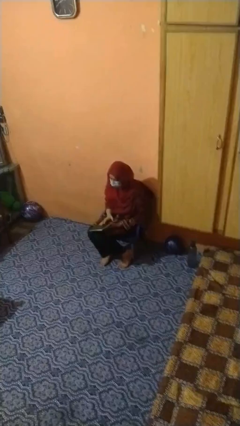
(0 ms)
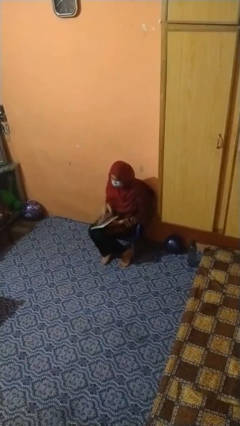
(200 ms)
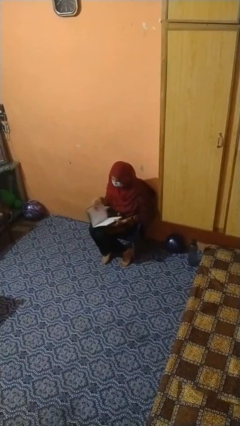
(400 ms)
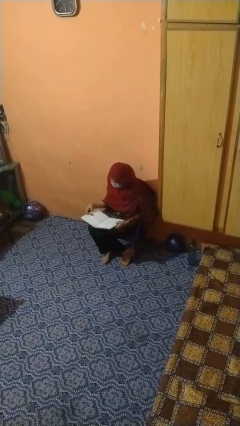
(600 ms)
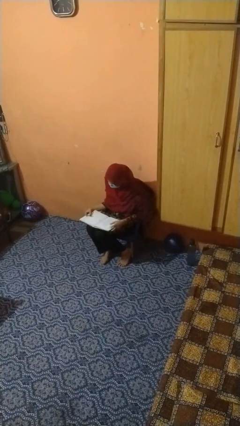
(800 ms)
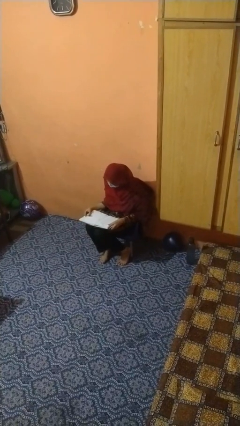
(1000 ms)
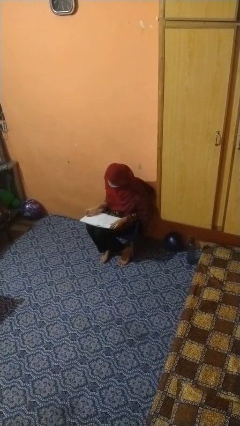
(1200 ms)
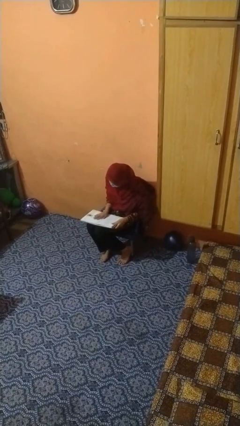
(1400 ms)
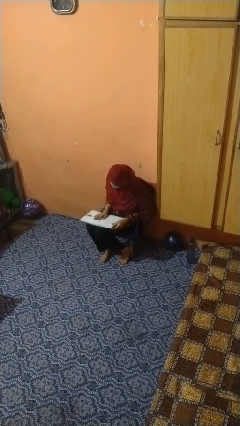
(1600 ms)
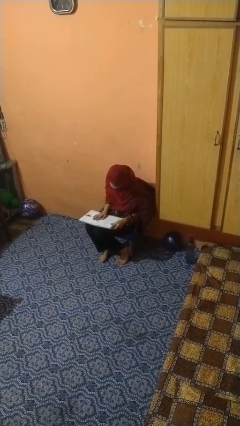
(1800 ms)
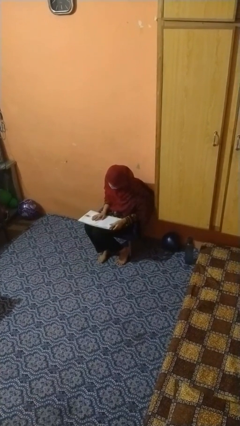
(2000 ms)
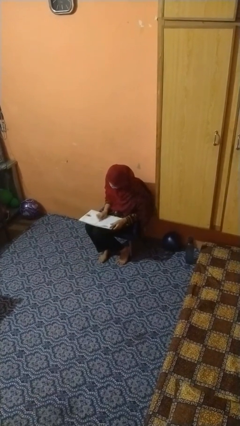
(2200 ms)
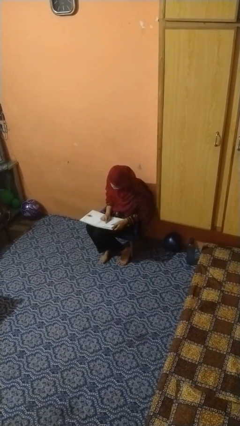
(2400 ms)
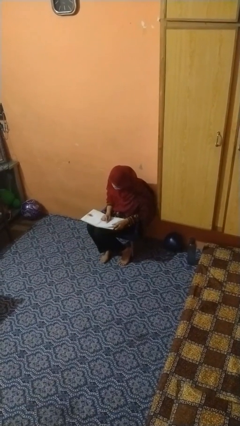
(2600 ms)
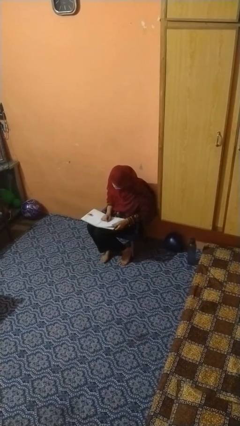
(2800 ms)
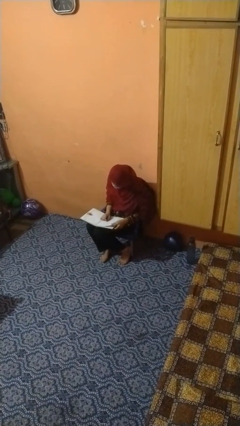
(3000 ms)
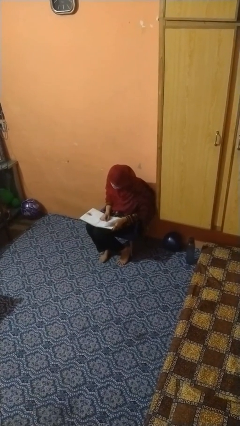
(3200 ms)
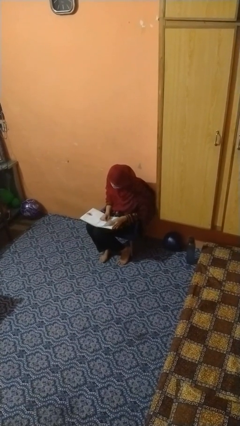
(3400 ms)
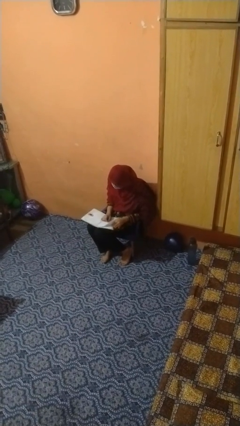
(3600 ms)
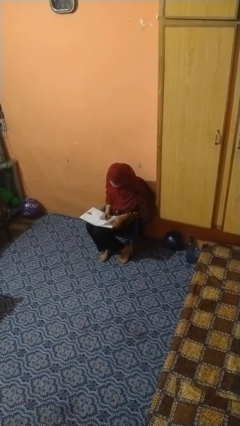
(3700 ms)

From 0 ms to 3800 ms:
person reads book

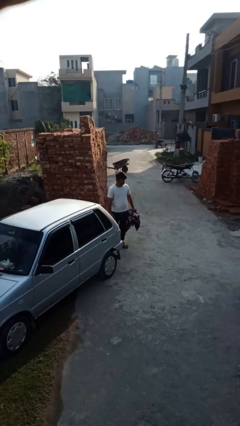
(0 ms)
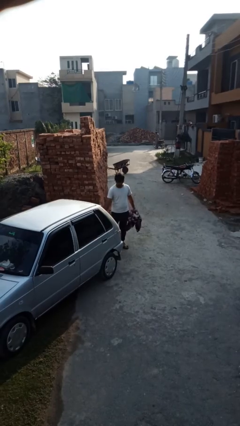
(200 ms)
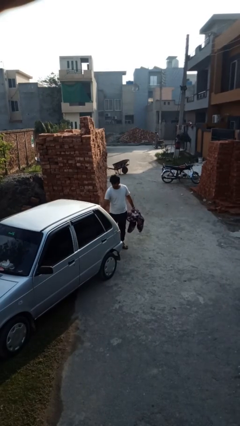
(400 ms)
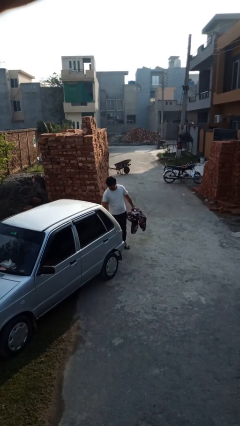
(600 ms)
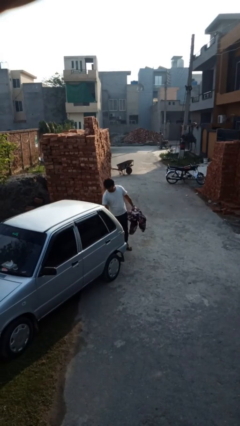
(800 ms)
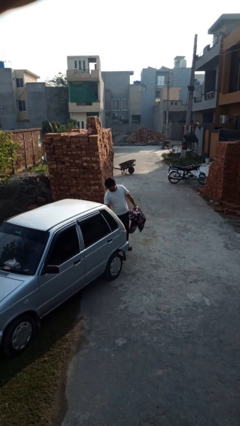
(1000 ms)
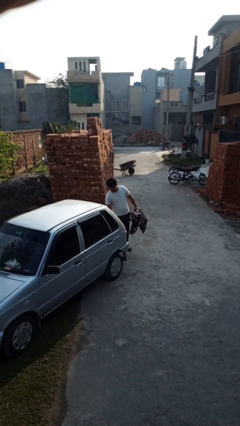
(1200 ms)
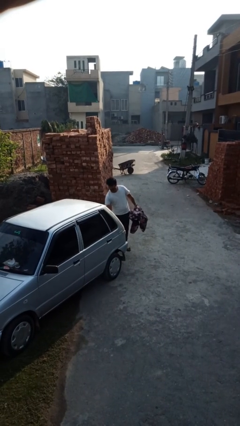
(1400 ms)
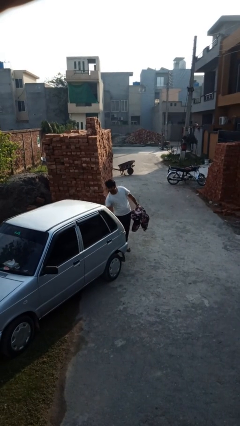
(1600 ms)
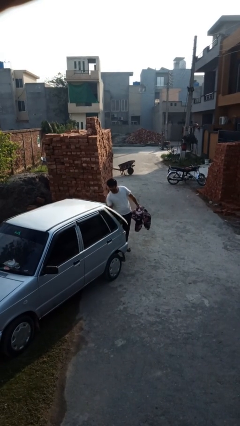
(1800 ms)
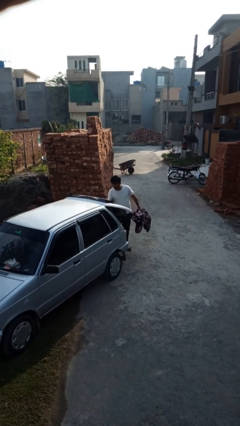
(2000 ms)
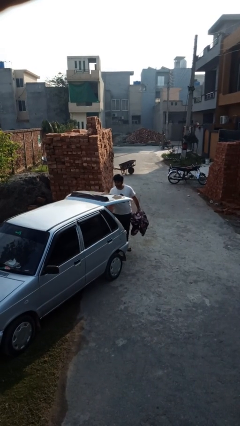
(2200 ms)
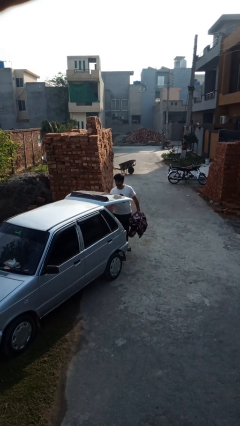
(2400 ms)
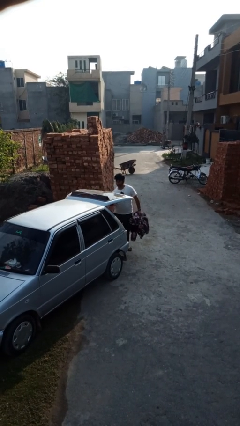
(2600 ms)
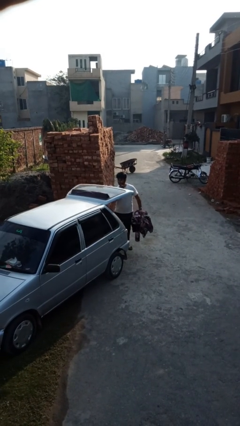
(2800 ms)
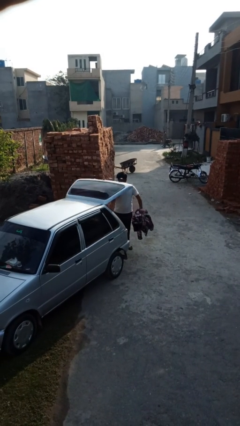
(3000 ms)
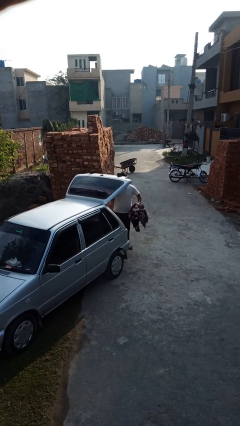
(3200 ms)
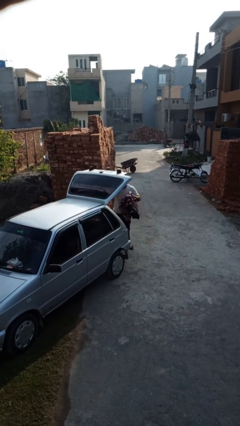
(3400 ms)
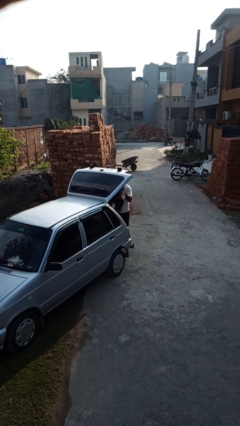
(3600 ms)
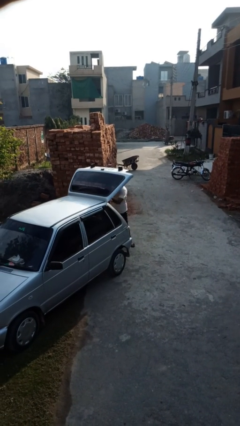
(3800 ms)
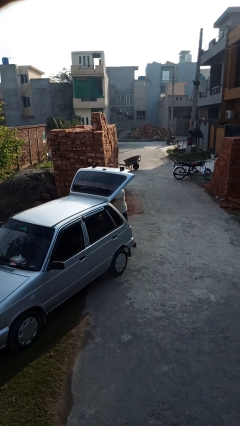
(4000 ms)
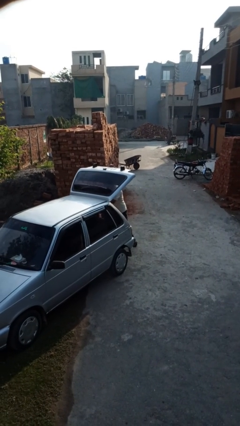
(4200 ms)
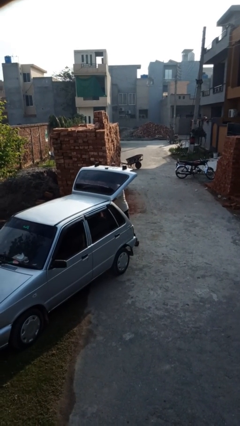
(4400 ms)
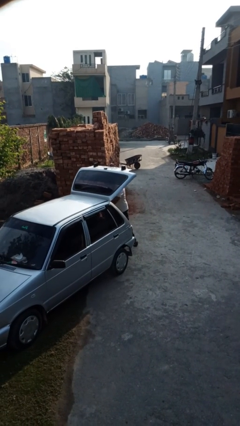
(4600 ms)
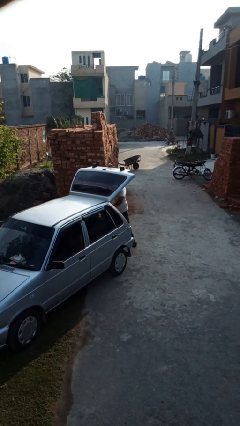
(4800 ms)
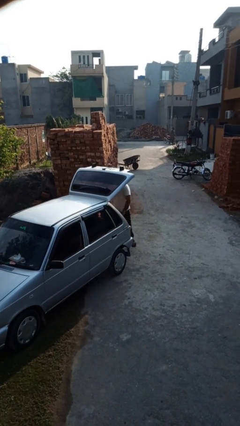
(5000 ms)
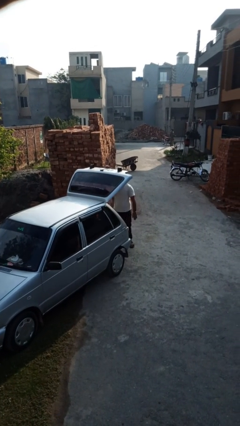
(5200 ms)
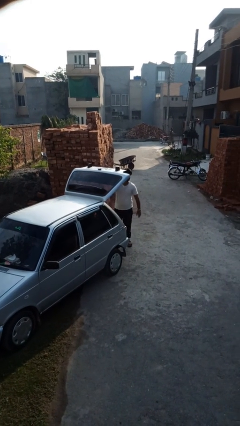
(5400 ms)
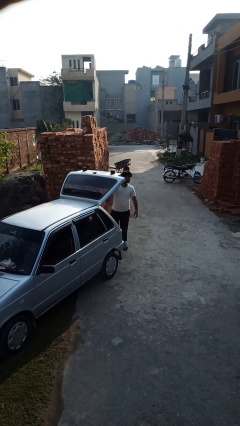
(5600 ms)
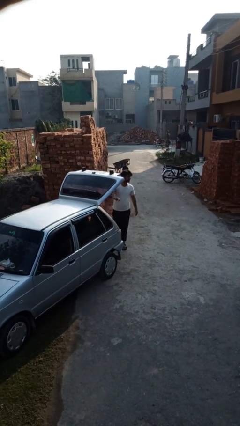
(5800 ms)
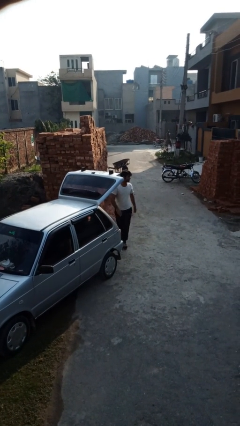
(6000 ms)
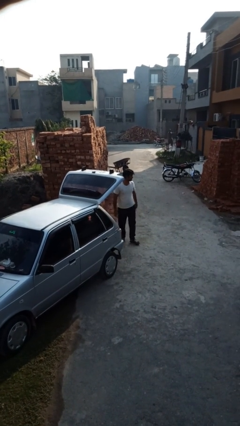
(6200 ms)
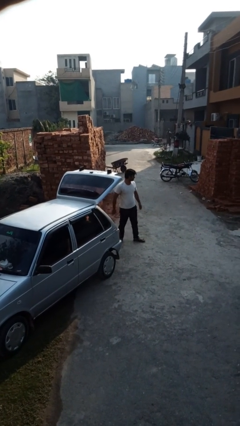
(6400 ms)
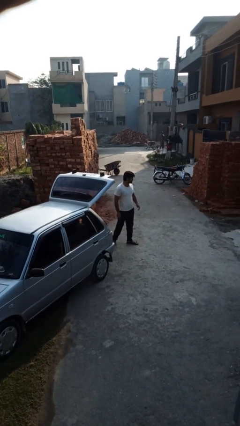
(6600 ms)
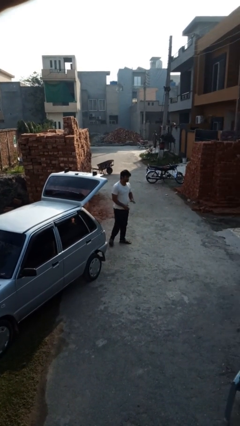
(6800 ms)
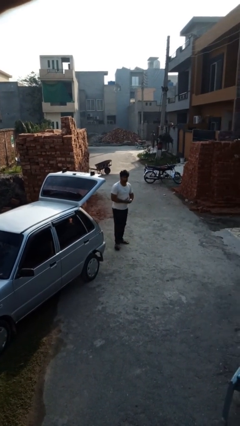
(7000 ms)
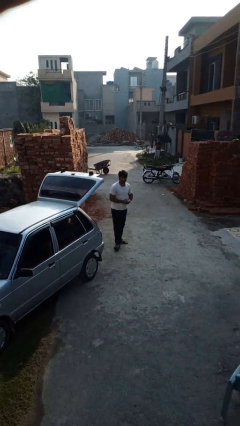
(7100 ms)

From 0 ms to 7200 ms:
person loads car

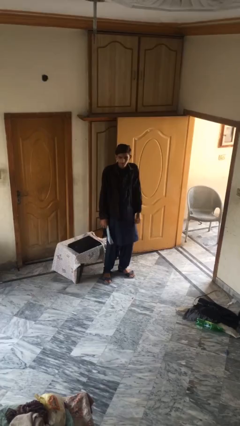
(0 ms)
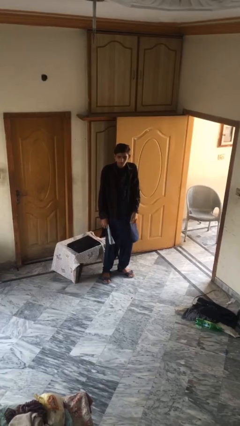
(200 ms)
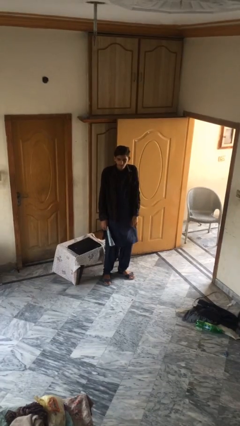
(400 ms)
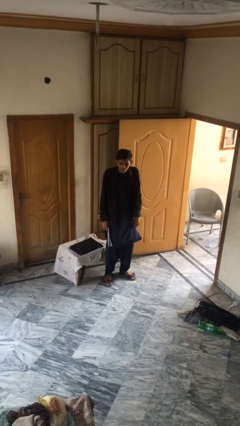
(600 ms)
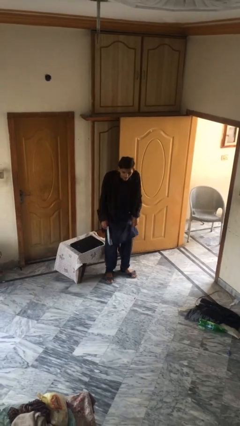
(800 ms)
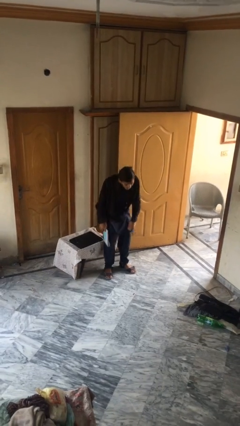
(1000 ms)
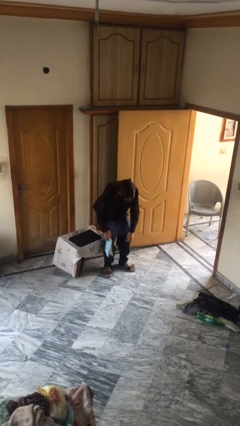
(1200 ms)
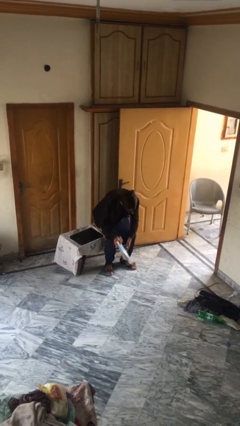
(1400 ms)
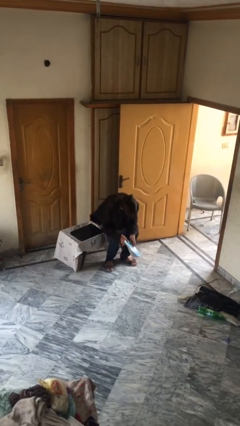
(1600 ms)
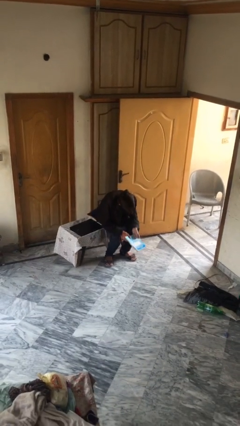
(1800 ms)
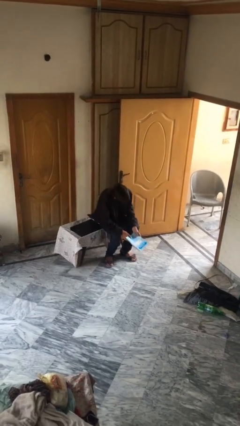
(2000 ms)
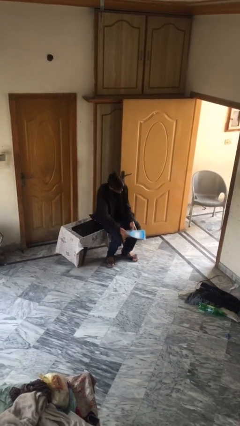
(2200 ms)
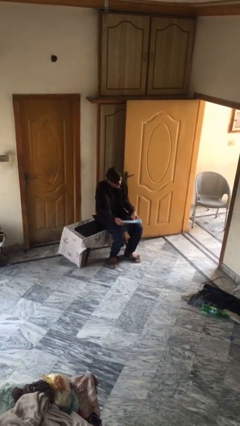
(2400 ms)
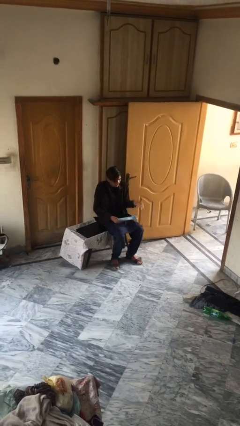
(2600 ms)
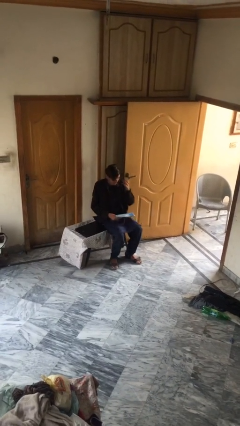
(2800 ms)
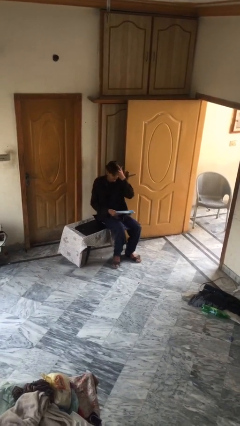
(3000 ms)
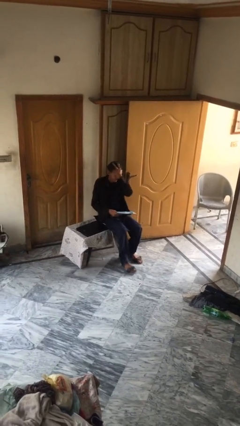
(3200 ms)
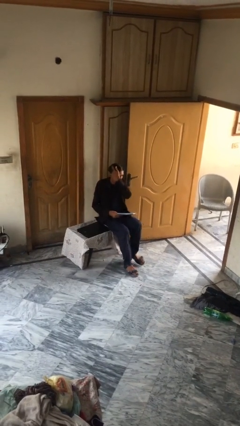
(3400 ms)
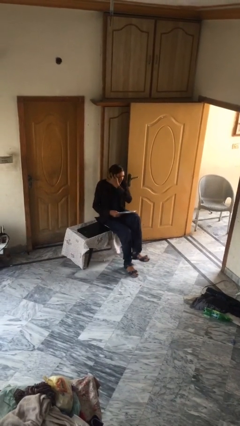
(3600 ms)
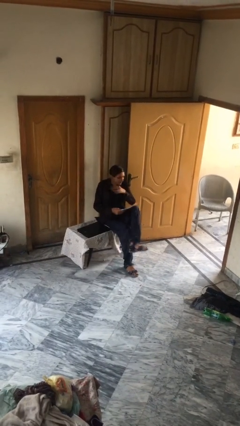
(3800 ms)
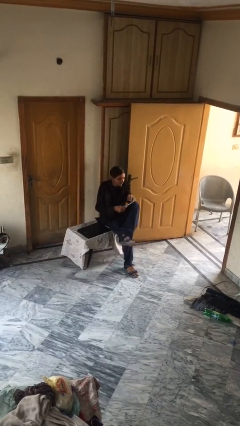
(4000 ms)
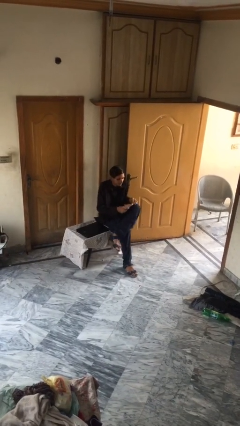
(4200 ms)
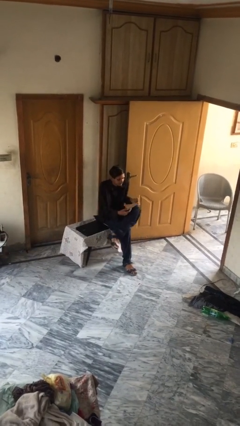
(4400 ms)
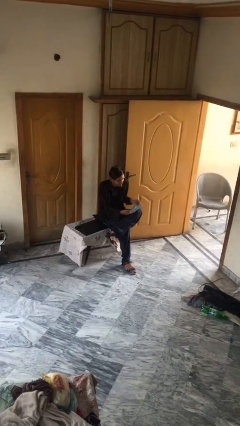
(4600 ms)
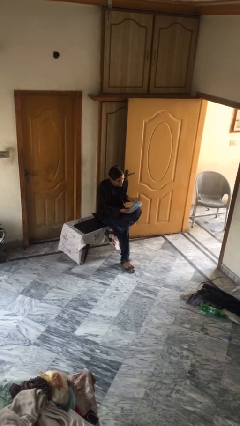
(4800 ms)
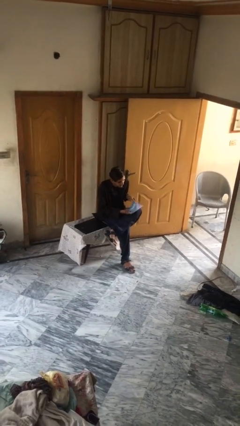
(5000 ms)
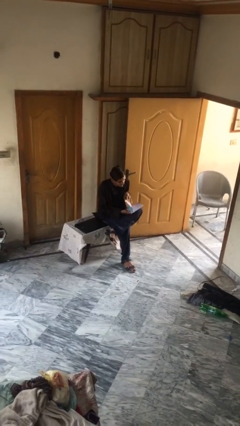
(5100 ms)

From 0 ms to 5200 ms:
person sits down

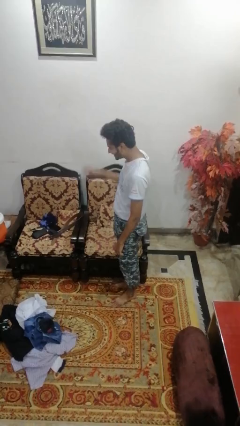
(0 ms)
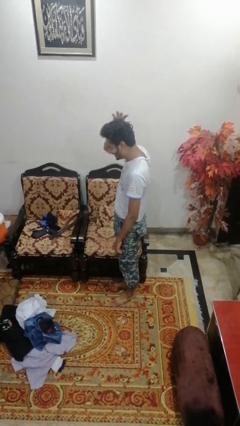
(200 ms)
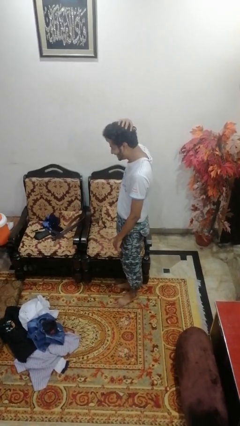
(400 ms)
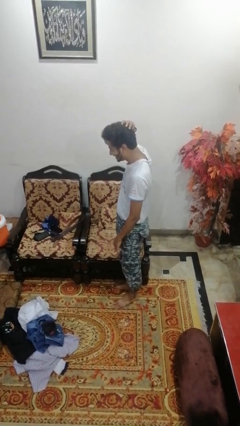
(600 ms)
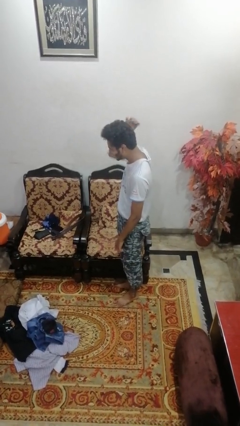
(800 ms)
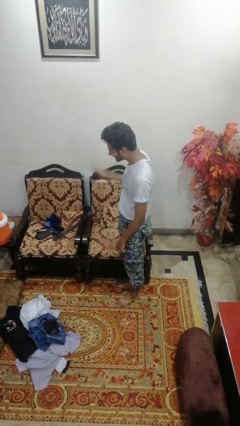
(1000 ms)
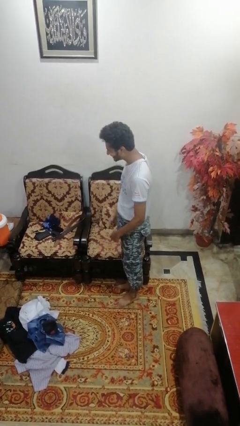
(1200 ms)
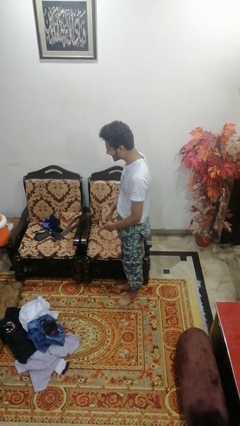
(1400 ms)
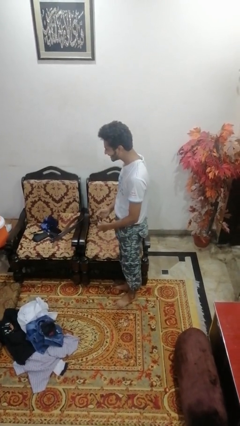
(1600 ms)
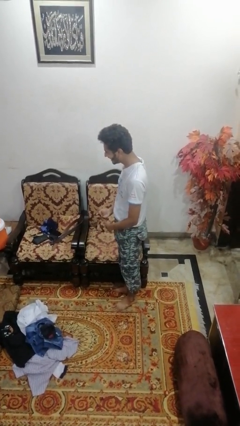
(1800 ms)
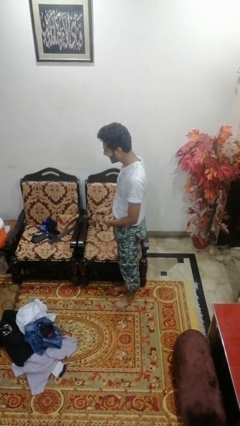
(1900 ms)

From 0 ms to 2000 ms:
person takes off hairtie
